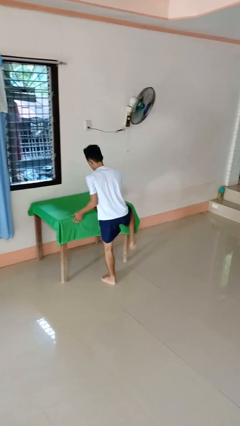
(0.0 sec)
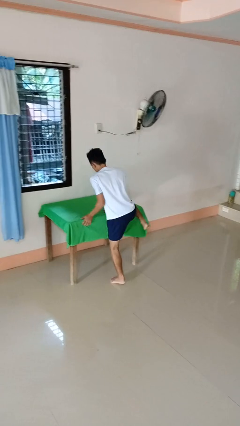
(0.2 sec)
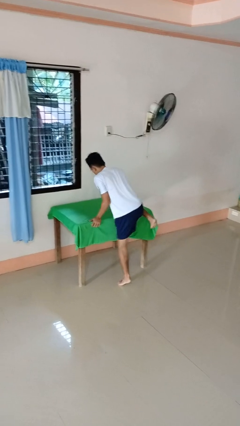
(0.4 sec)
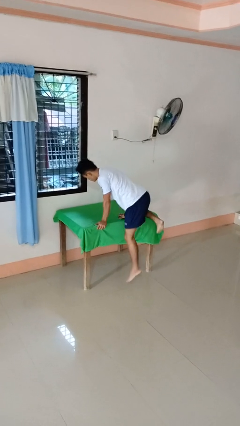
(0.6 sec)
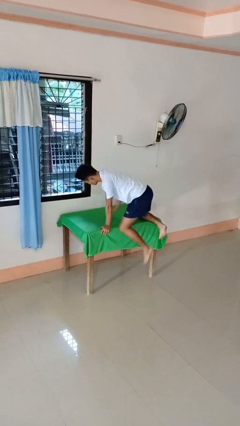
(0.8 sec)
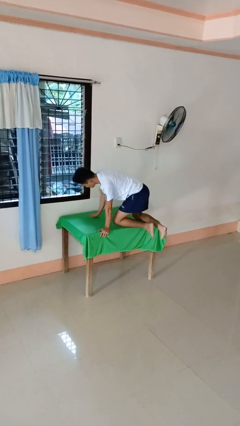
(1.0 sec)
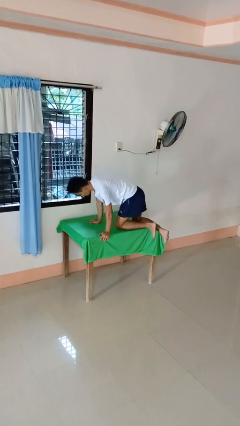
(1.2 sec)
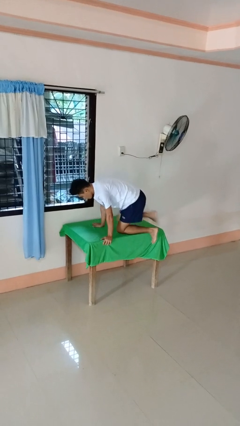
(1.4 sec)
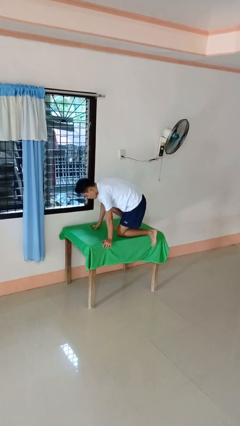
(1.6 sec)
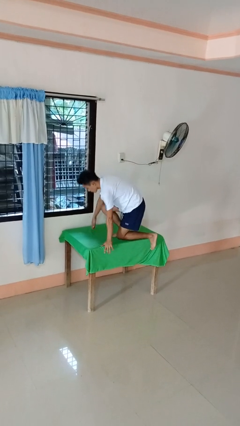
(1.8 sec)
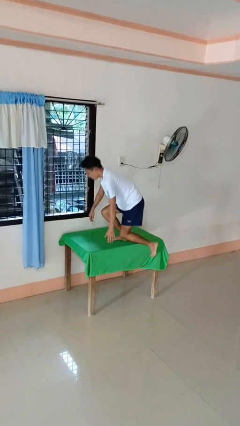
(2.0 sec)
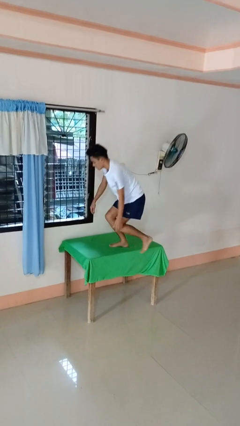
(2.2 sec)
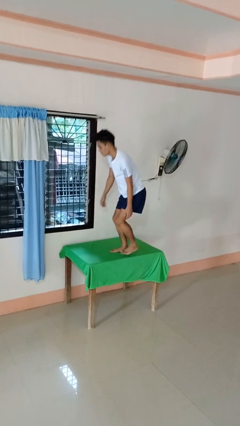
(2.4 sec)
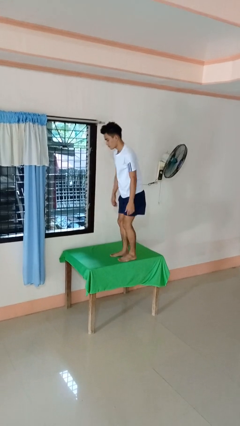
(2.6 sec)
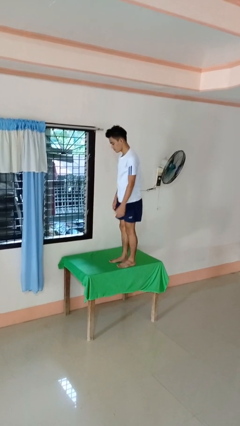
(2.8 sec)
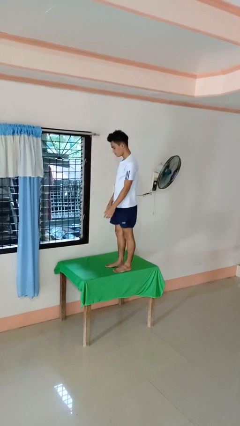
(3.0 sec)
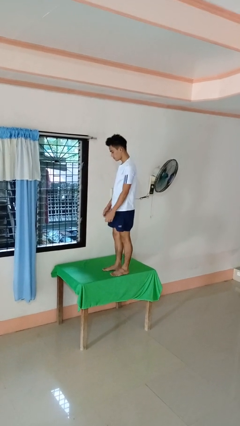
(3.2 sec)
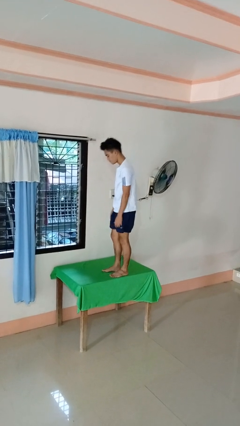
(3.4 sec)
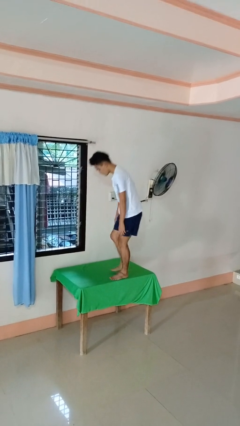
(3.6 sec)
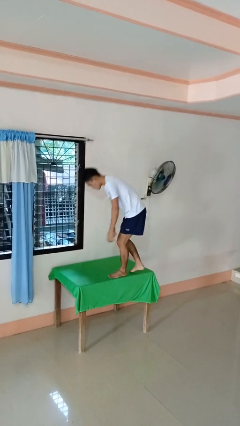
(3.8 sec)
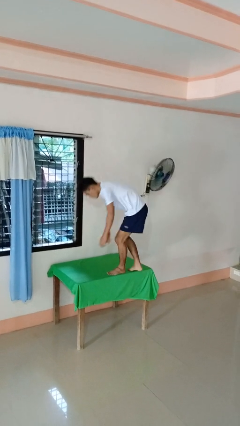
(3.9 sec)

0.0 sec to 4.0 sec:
person climbs on table

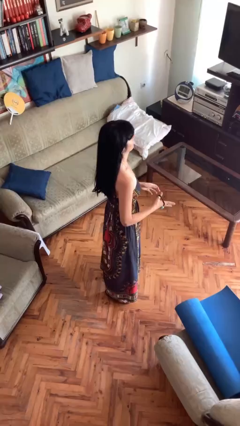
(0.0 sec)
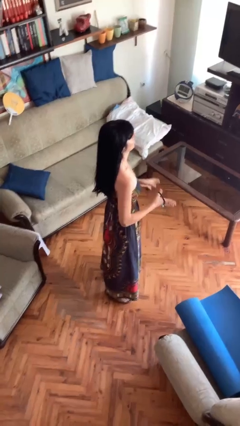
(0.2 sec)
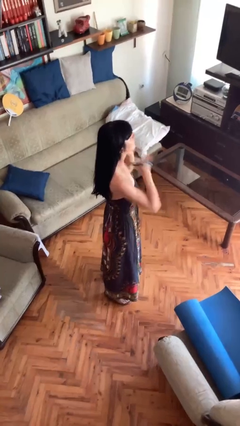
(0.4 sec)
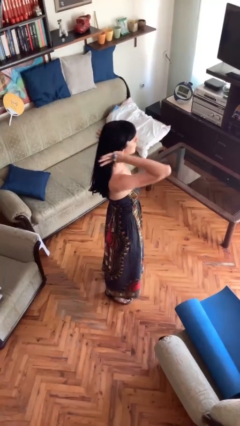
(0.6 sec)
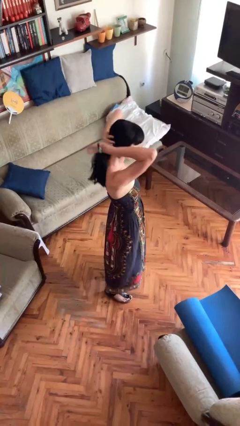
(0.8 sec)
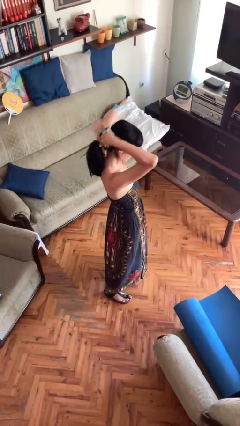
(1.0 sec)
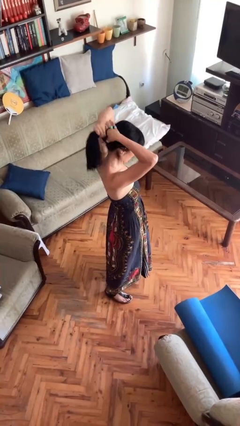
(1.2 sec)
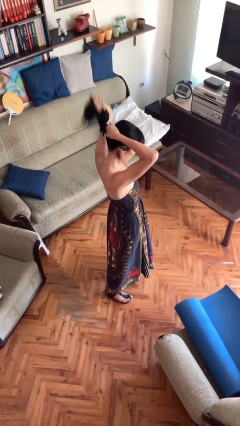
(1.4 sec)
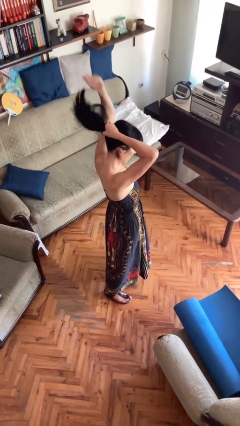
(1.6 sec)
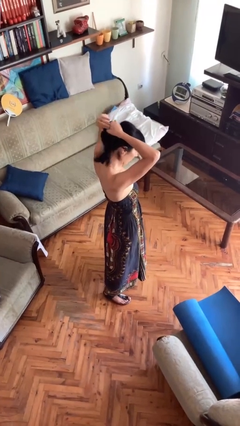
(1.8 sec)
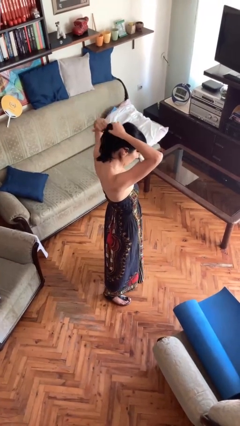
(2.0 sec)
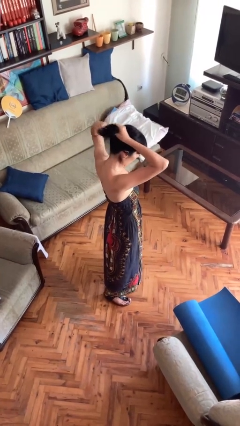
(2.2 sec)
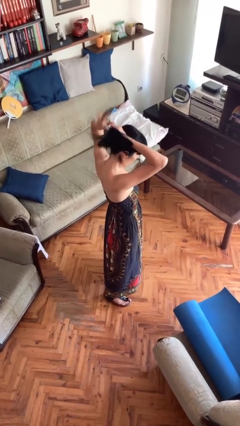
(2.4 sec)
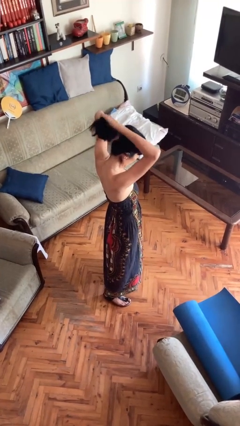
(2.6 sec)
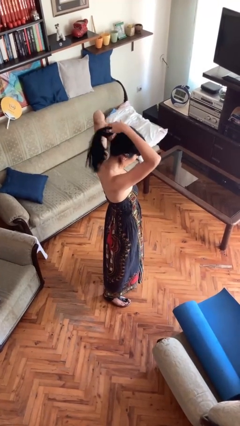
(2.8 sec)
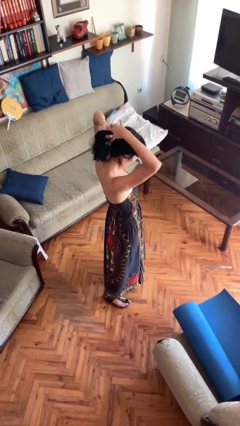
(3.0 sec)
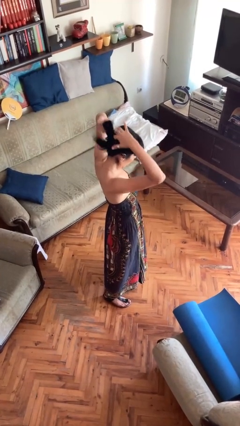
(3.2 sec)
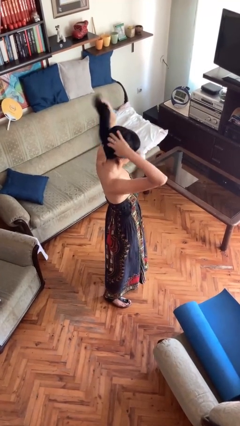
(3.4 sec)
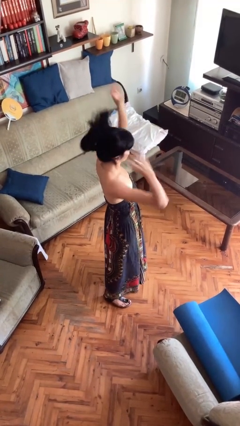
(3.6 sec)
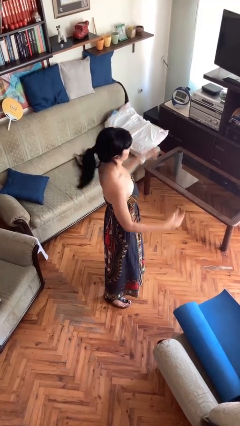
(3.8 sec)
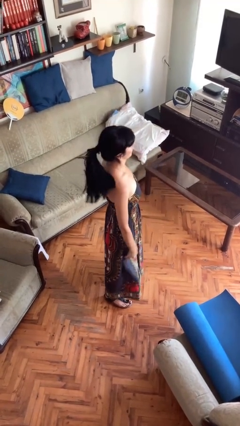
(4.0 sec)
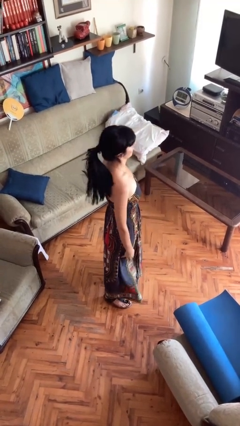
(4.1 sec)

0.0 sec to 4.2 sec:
person puts hair in ponytail

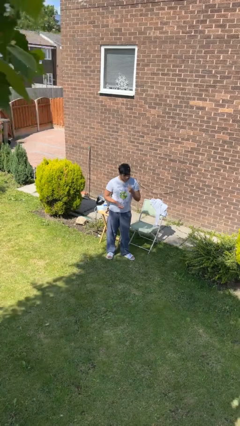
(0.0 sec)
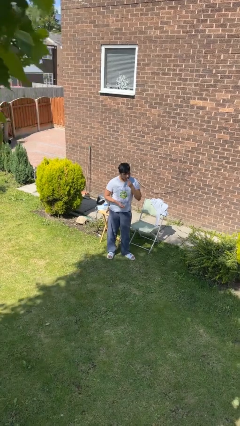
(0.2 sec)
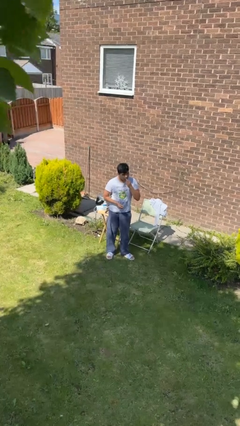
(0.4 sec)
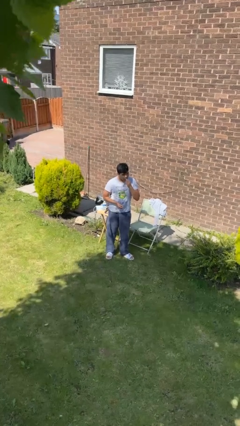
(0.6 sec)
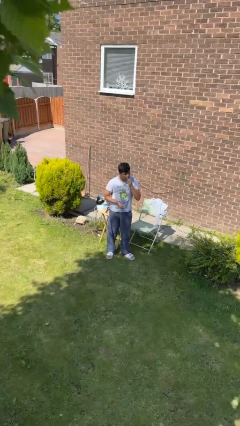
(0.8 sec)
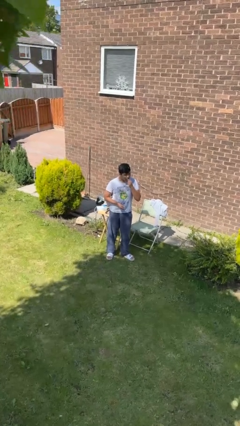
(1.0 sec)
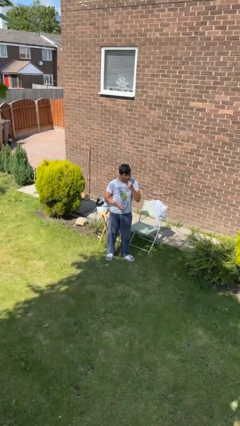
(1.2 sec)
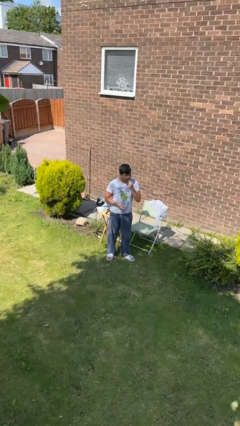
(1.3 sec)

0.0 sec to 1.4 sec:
person flosses

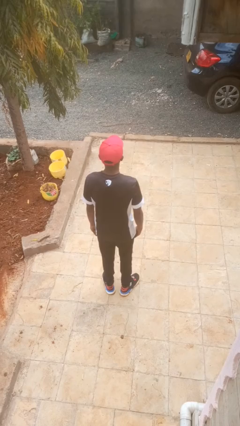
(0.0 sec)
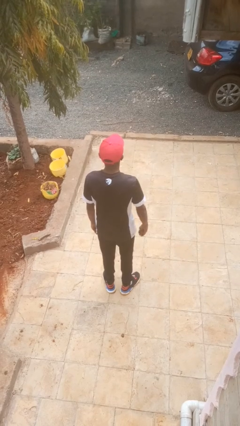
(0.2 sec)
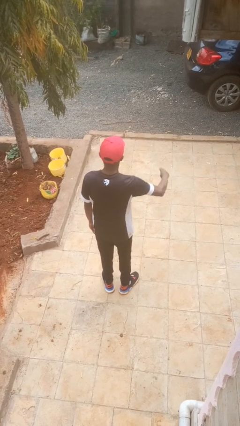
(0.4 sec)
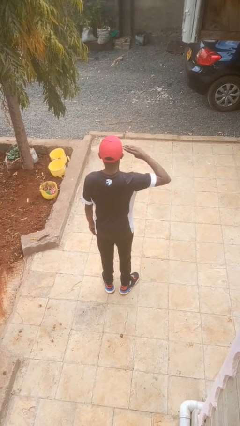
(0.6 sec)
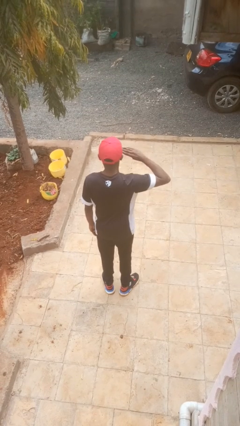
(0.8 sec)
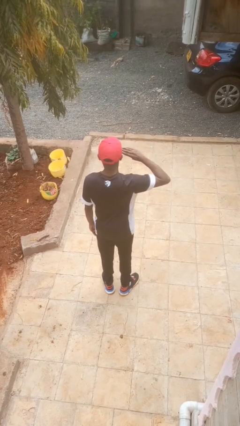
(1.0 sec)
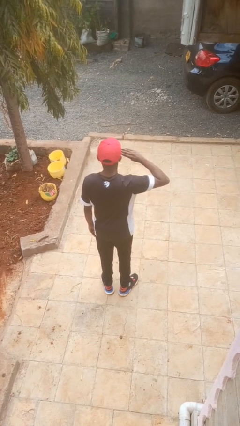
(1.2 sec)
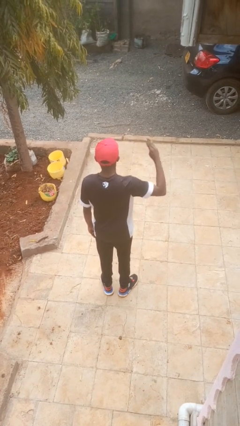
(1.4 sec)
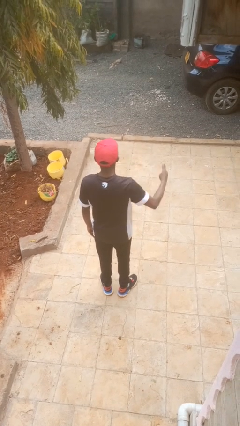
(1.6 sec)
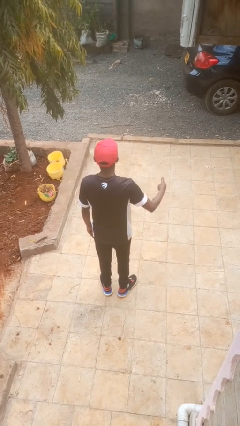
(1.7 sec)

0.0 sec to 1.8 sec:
person salutes

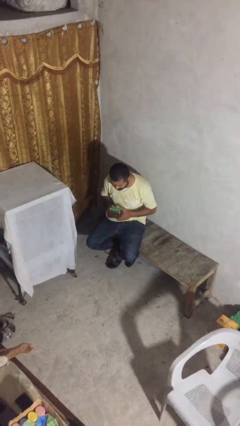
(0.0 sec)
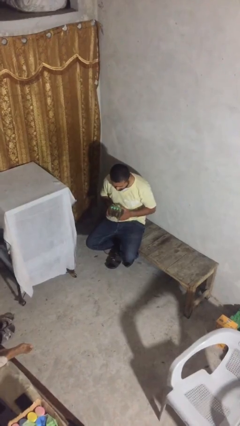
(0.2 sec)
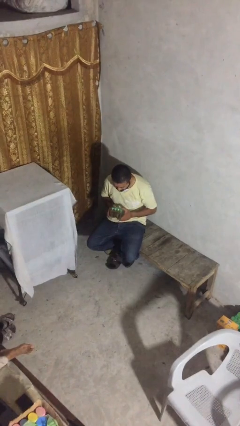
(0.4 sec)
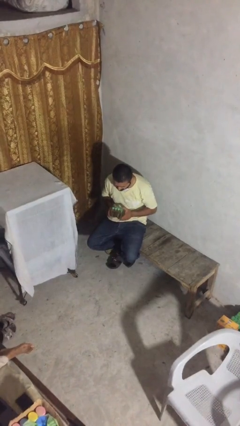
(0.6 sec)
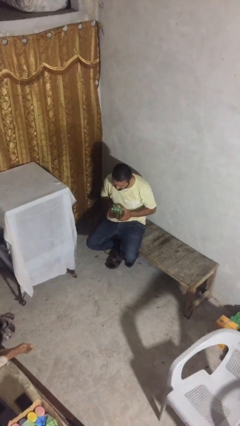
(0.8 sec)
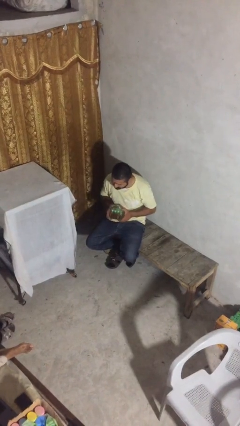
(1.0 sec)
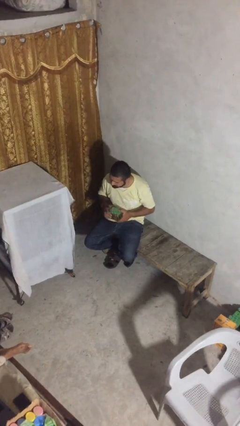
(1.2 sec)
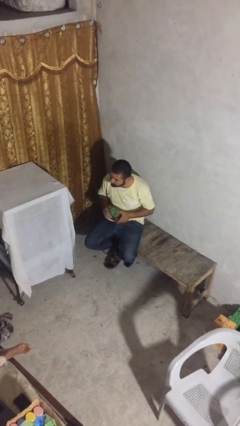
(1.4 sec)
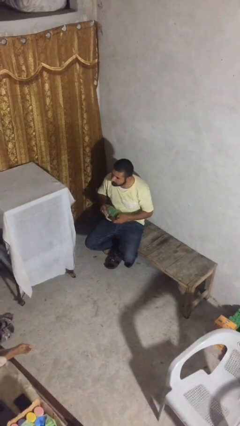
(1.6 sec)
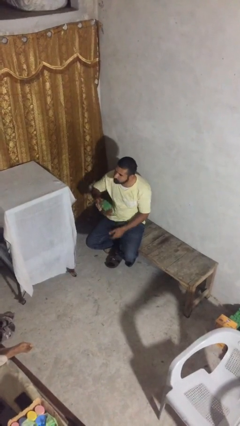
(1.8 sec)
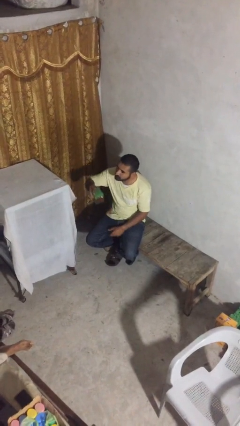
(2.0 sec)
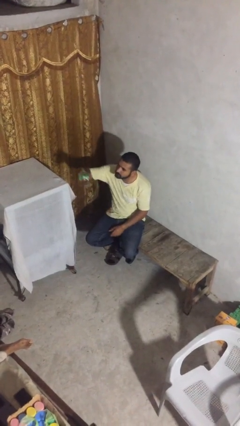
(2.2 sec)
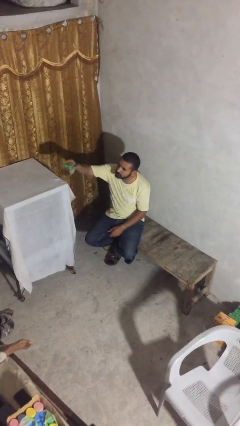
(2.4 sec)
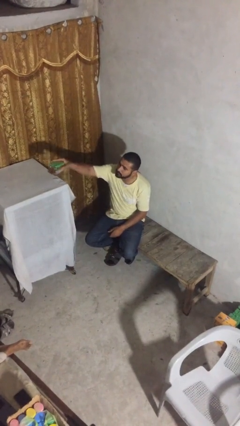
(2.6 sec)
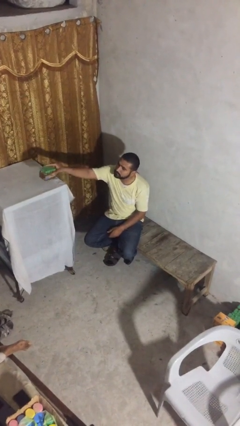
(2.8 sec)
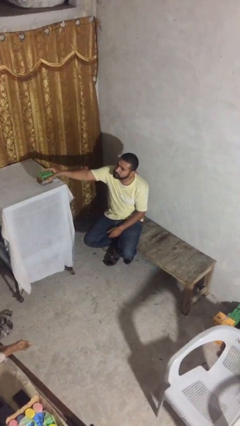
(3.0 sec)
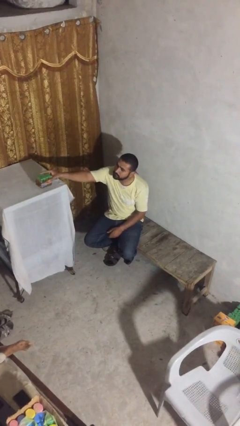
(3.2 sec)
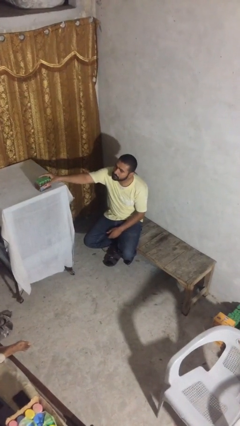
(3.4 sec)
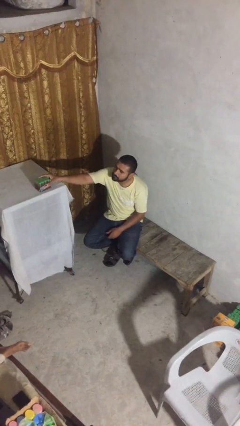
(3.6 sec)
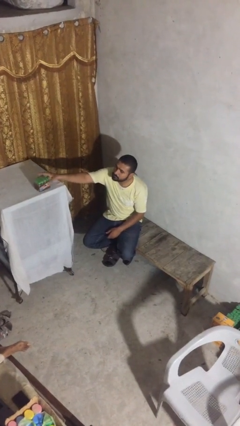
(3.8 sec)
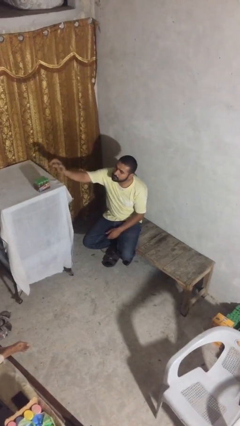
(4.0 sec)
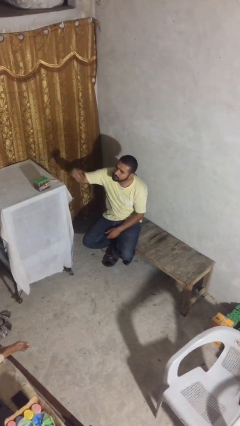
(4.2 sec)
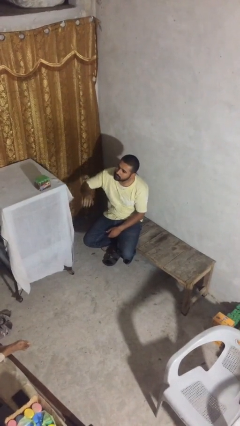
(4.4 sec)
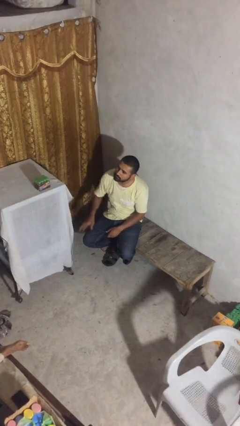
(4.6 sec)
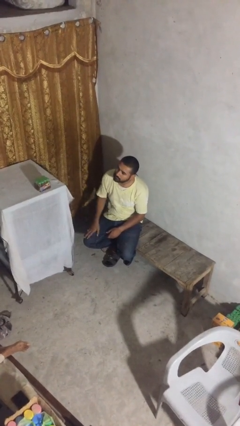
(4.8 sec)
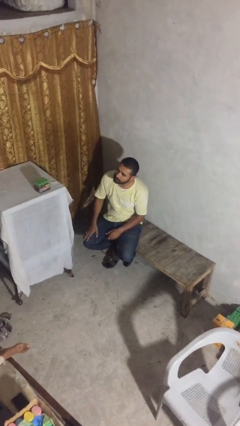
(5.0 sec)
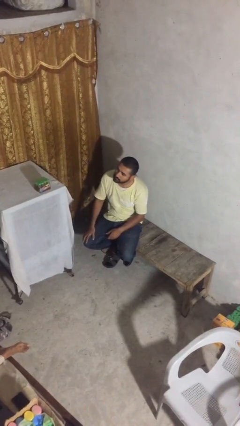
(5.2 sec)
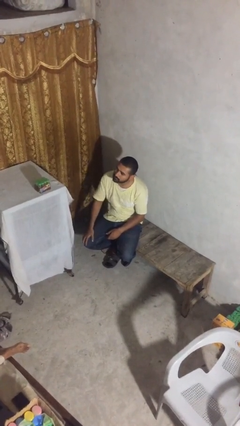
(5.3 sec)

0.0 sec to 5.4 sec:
person puts down object on shelf

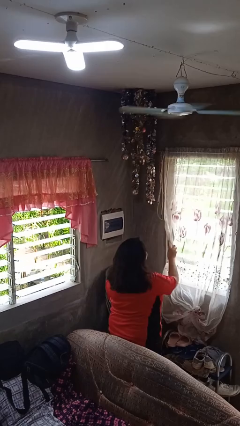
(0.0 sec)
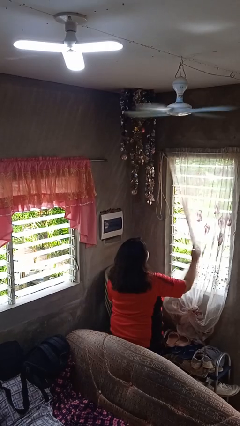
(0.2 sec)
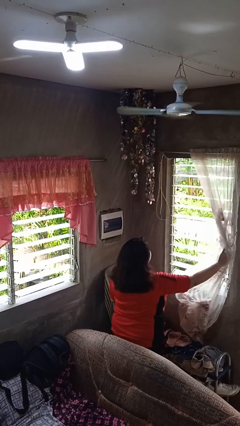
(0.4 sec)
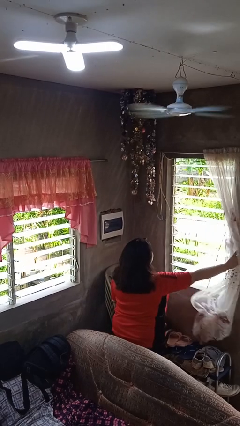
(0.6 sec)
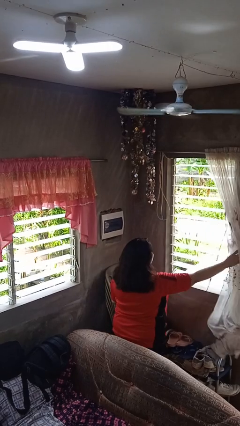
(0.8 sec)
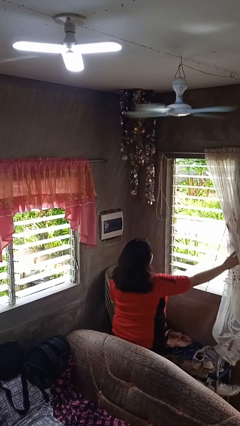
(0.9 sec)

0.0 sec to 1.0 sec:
person opens curtains
